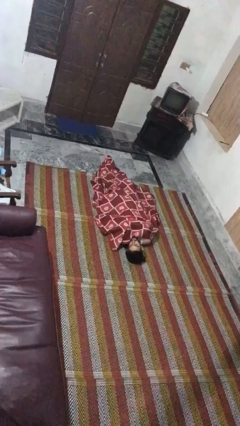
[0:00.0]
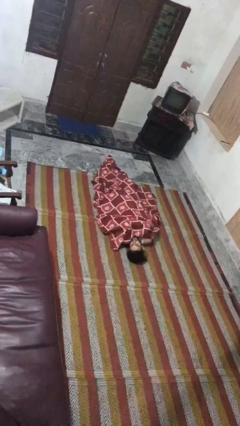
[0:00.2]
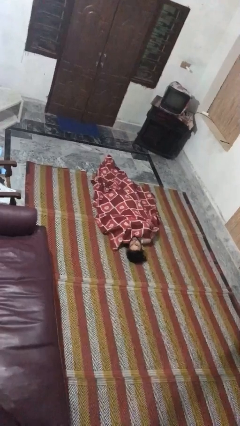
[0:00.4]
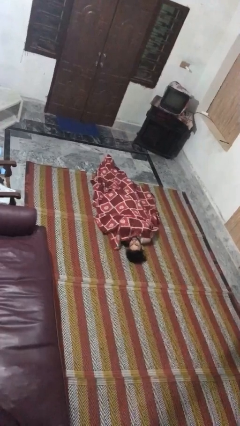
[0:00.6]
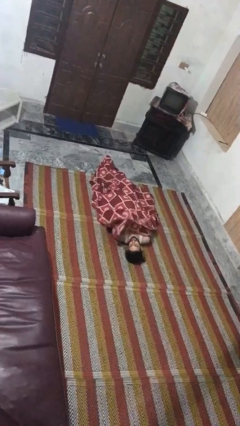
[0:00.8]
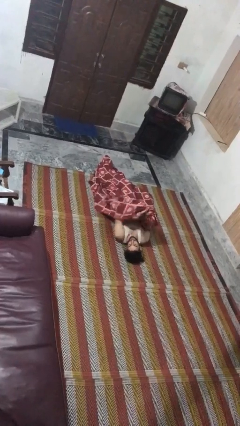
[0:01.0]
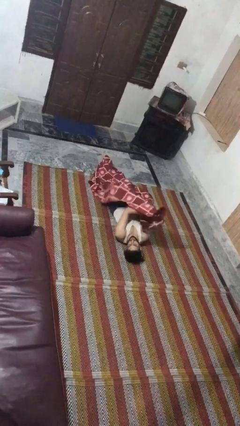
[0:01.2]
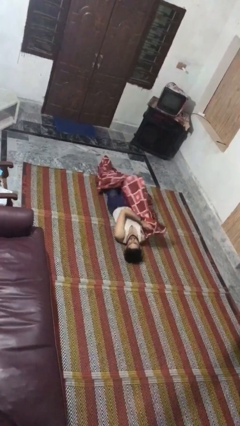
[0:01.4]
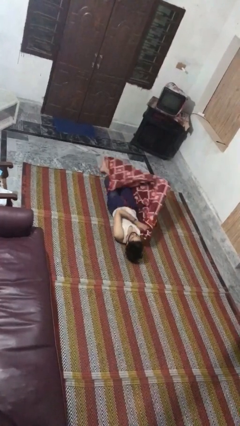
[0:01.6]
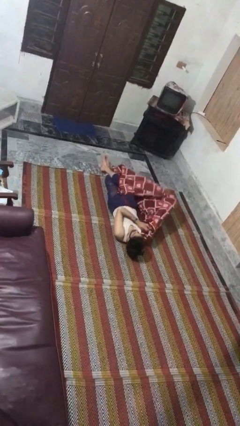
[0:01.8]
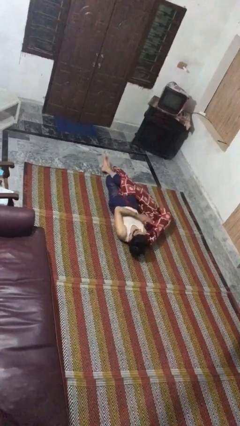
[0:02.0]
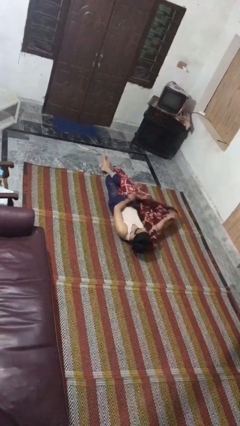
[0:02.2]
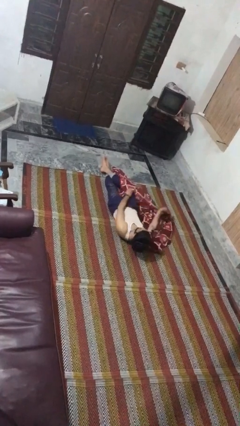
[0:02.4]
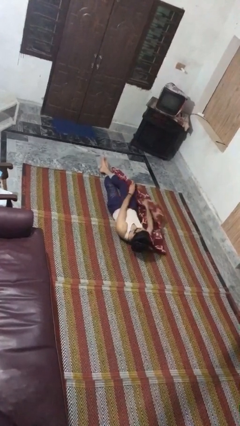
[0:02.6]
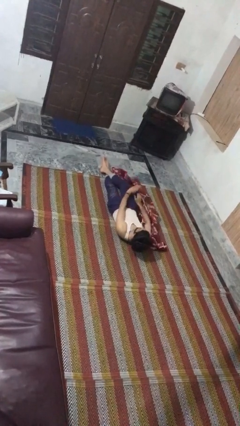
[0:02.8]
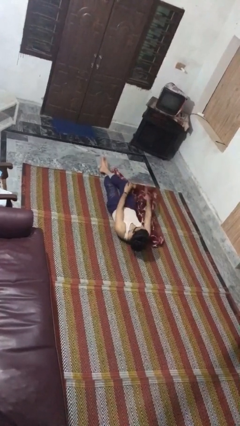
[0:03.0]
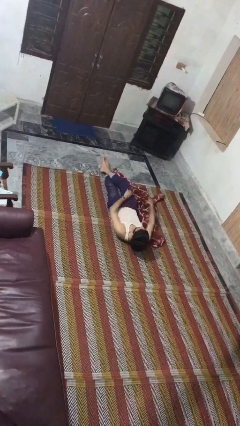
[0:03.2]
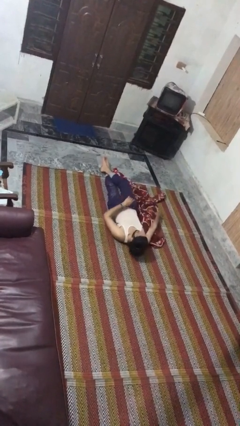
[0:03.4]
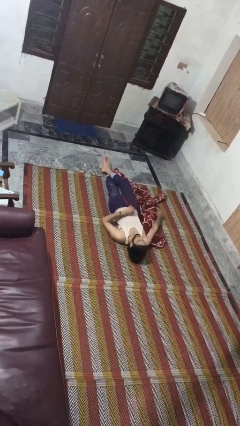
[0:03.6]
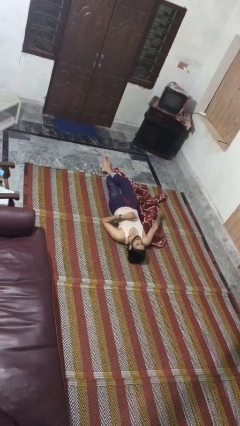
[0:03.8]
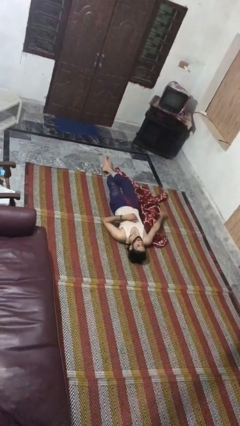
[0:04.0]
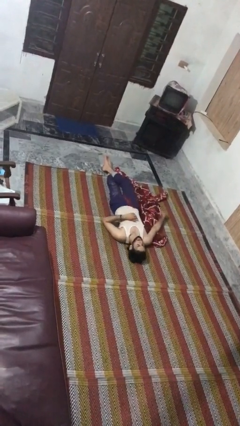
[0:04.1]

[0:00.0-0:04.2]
person uncovers with blanket

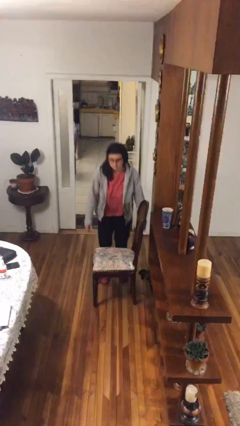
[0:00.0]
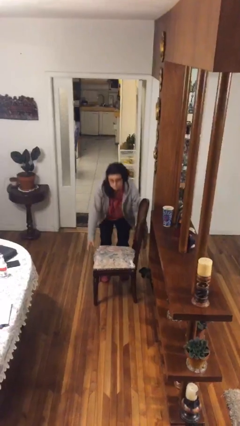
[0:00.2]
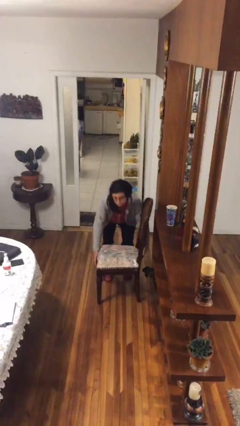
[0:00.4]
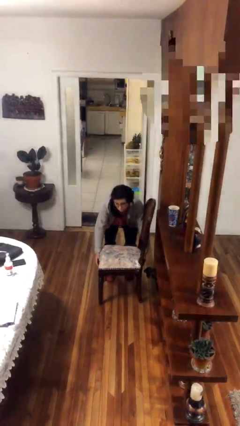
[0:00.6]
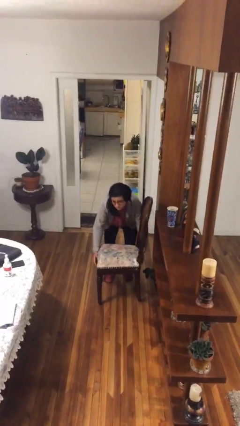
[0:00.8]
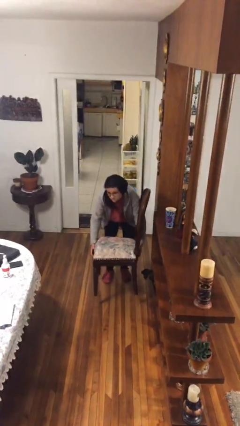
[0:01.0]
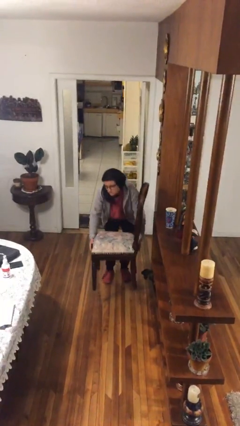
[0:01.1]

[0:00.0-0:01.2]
person picks up object from floor

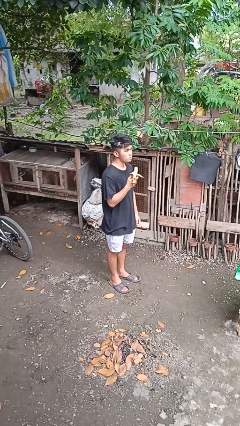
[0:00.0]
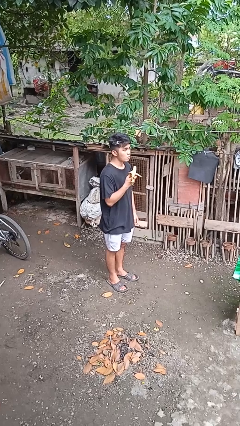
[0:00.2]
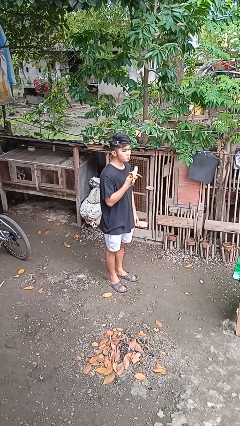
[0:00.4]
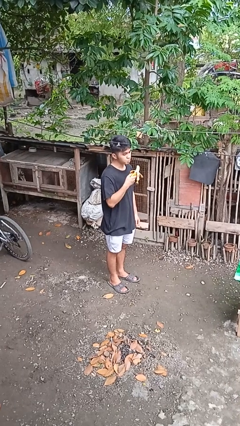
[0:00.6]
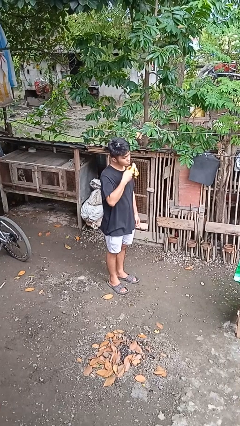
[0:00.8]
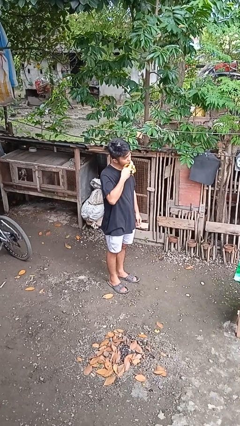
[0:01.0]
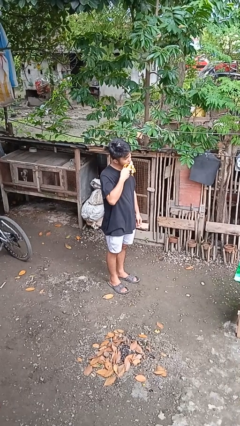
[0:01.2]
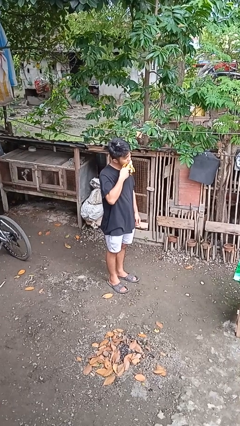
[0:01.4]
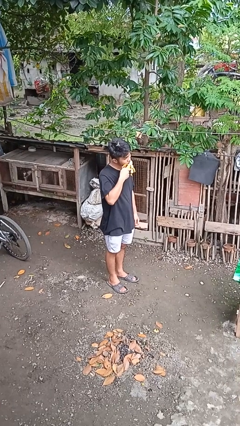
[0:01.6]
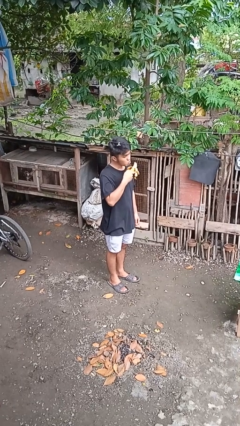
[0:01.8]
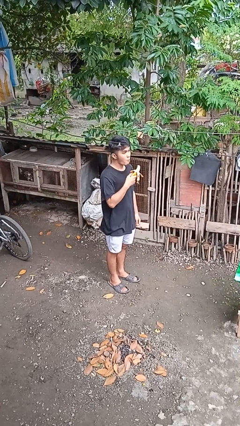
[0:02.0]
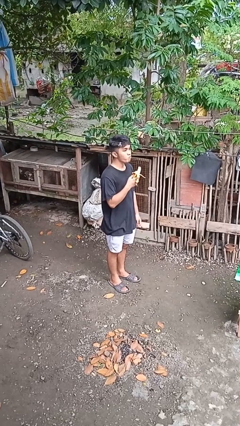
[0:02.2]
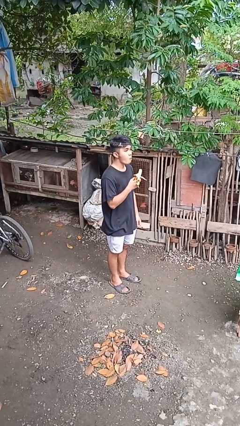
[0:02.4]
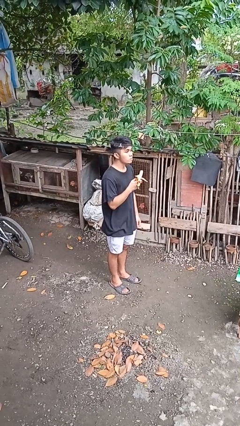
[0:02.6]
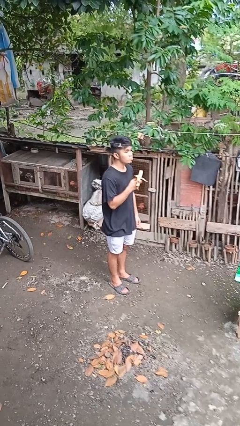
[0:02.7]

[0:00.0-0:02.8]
person eats banana

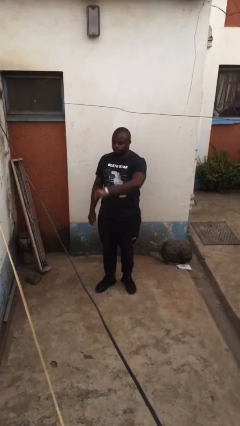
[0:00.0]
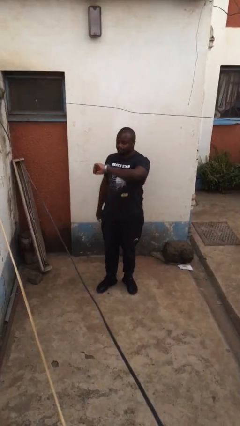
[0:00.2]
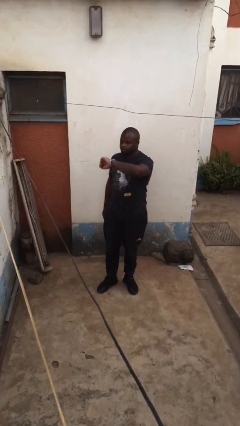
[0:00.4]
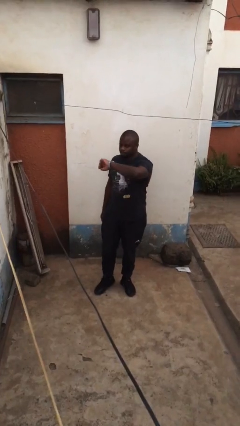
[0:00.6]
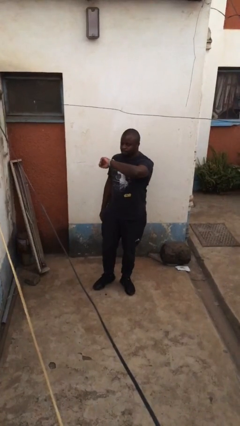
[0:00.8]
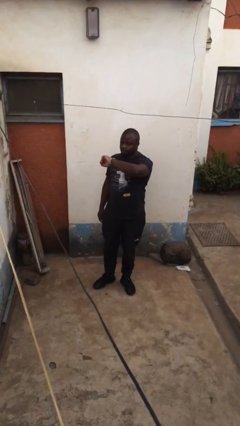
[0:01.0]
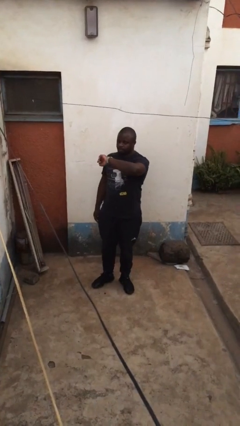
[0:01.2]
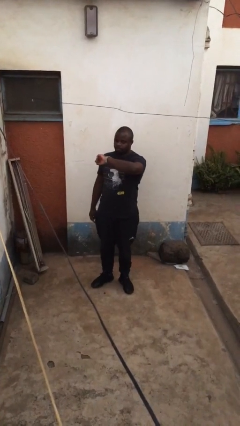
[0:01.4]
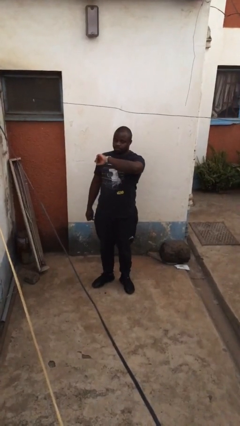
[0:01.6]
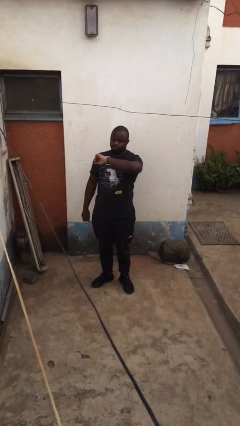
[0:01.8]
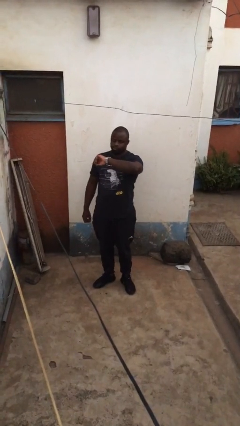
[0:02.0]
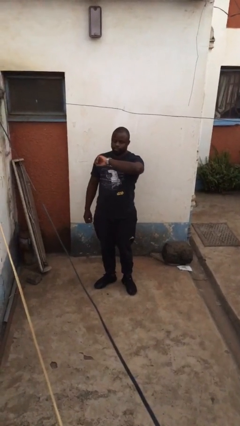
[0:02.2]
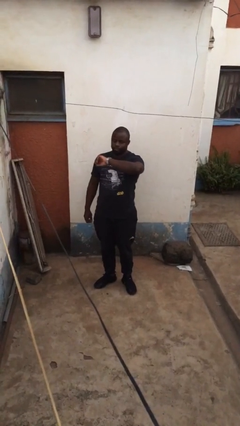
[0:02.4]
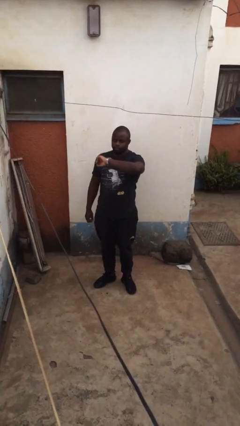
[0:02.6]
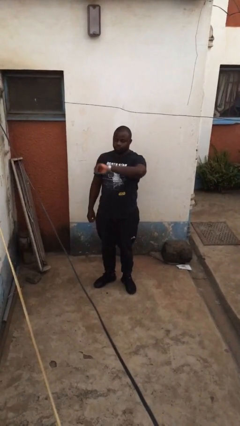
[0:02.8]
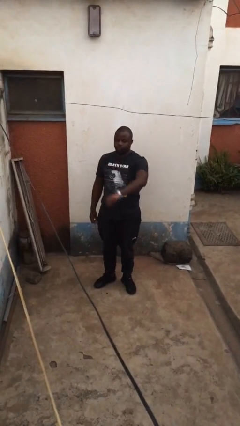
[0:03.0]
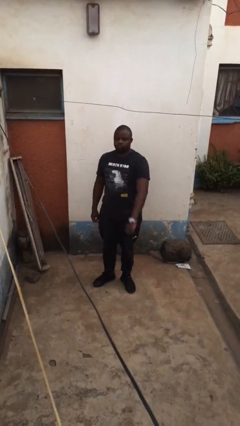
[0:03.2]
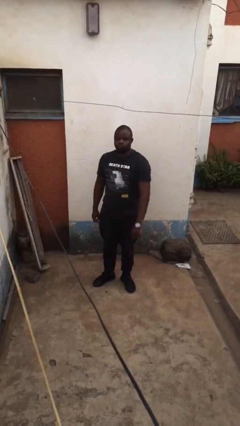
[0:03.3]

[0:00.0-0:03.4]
person looks at wristwatch

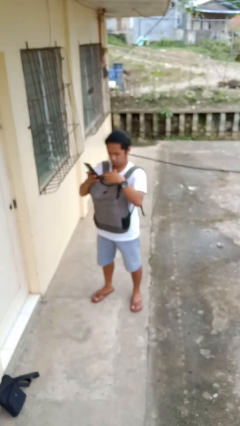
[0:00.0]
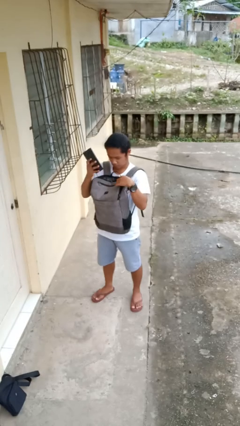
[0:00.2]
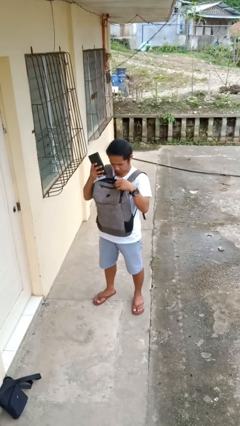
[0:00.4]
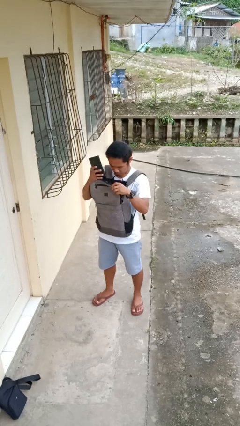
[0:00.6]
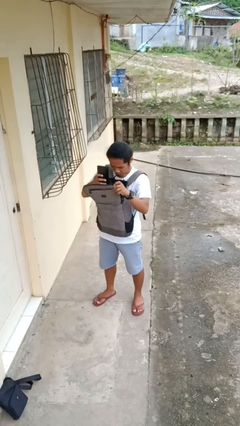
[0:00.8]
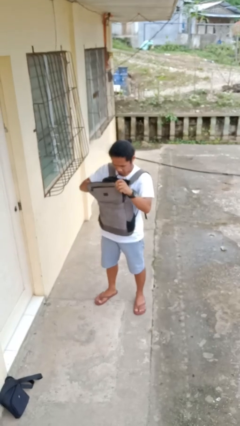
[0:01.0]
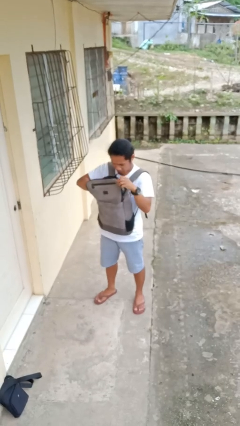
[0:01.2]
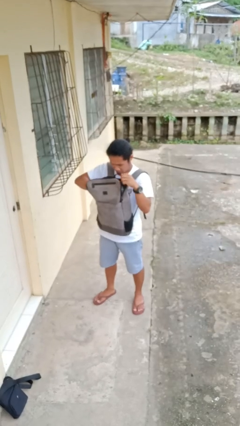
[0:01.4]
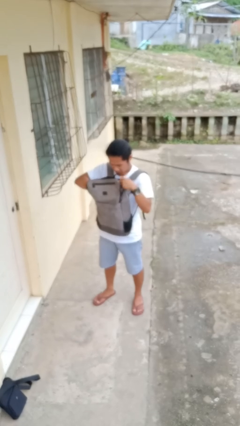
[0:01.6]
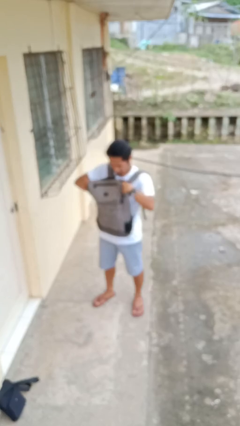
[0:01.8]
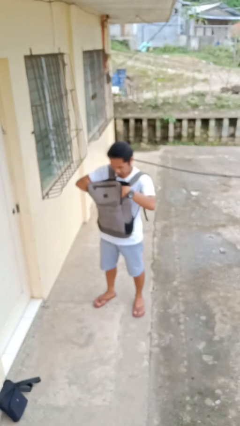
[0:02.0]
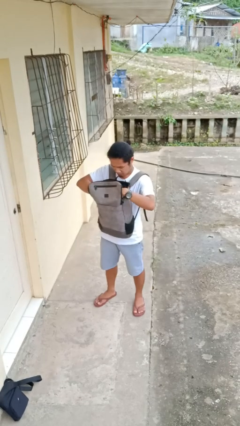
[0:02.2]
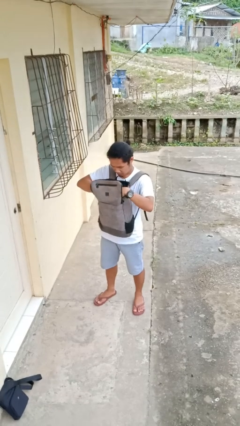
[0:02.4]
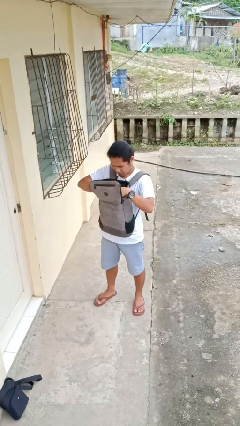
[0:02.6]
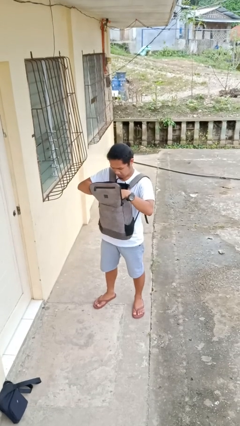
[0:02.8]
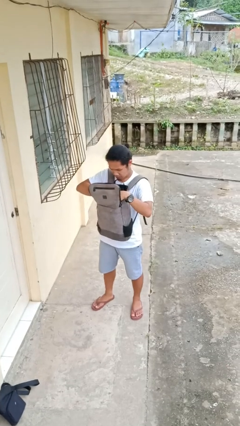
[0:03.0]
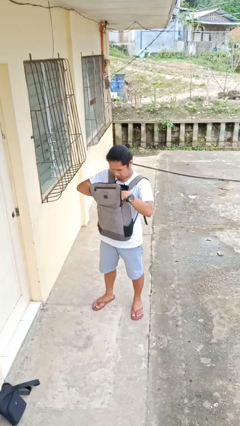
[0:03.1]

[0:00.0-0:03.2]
person puts object into backpack

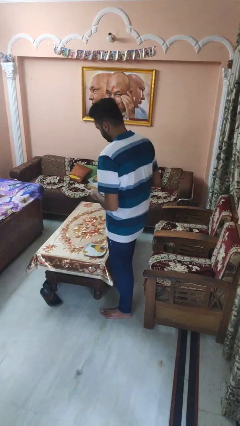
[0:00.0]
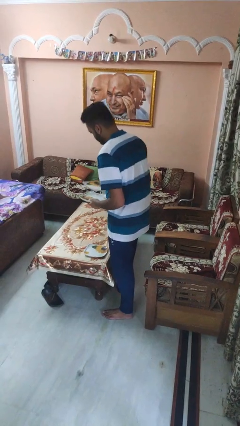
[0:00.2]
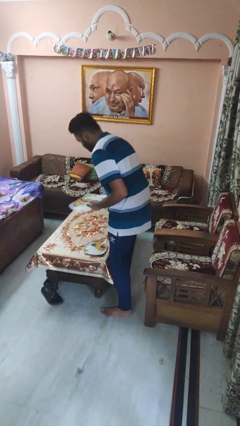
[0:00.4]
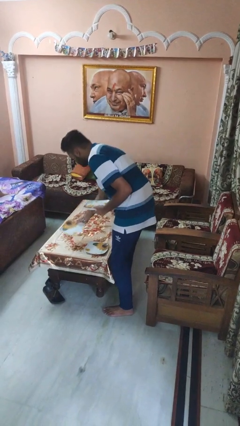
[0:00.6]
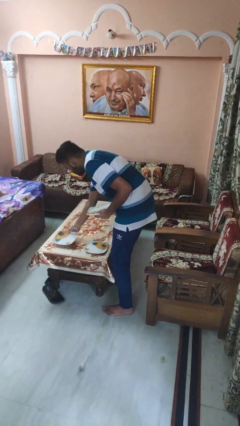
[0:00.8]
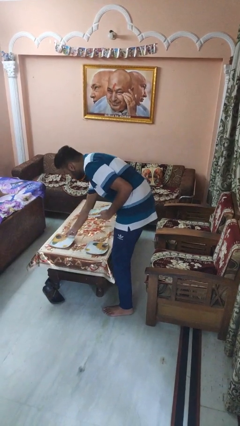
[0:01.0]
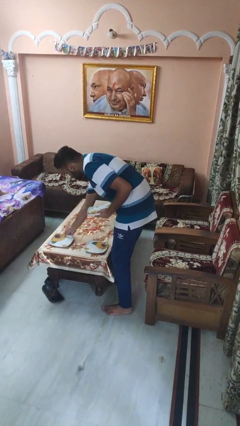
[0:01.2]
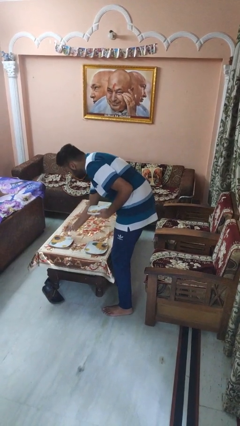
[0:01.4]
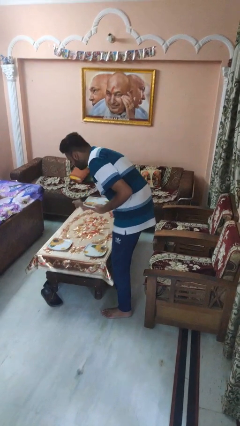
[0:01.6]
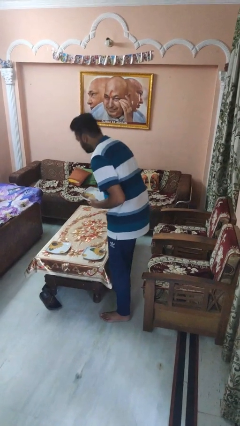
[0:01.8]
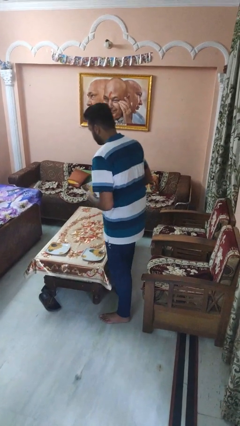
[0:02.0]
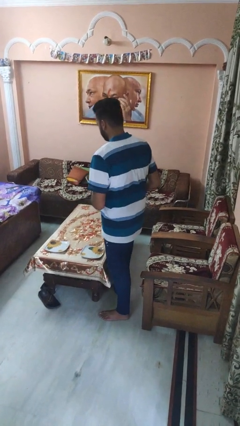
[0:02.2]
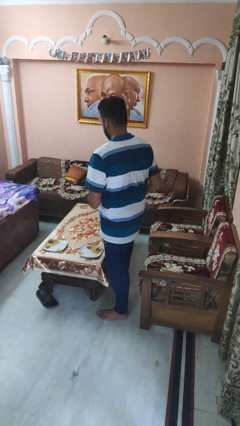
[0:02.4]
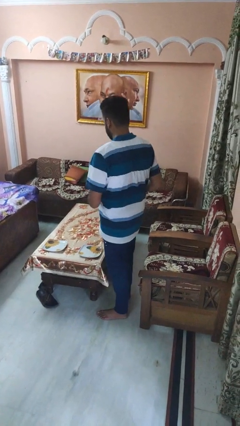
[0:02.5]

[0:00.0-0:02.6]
person sets table

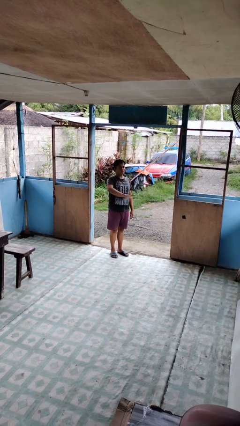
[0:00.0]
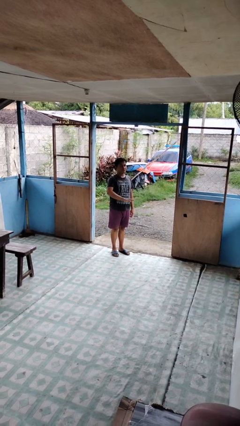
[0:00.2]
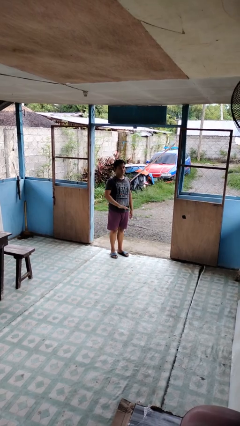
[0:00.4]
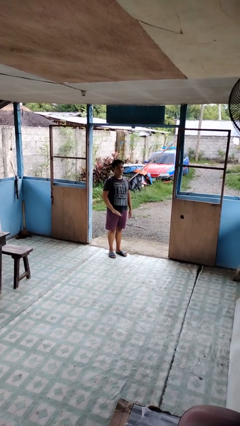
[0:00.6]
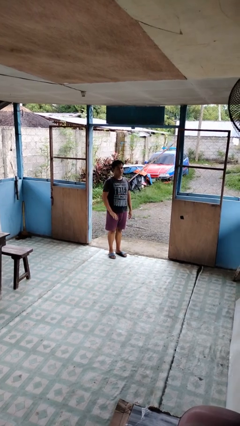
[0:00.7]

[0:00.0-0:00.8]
person gestures swipe down
